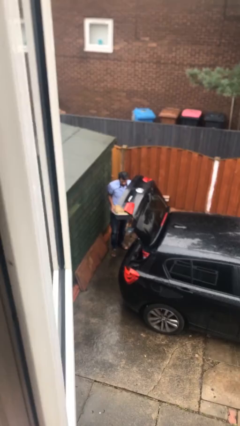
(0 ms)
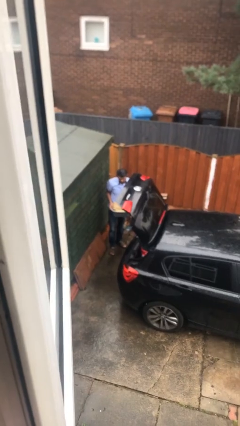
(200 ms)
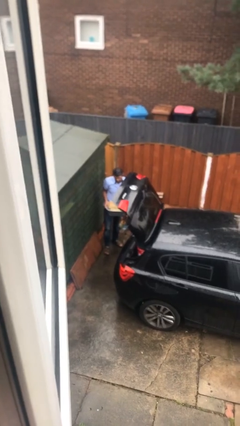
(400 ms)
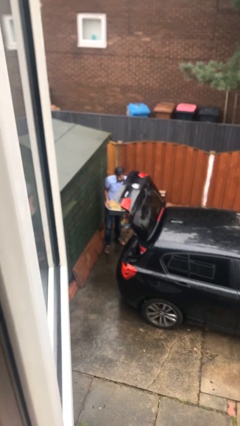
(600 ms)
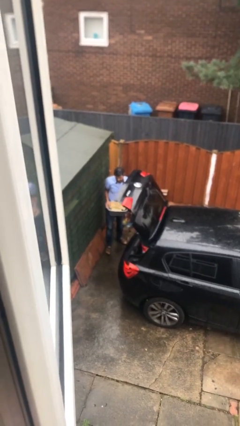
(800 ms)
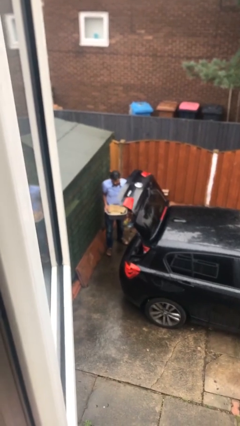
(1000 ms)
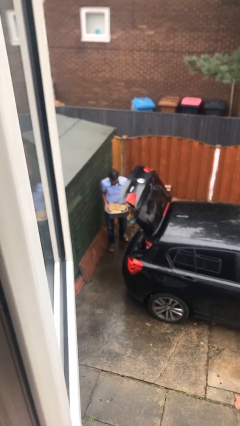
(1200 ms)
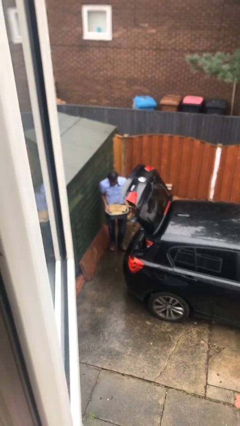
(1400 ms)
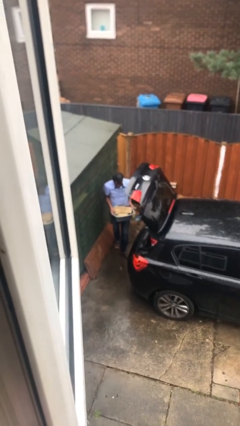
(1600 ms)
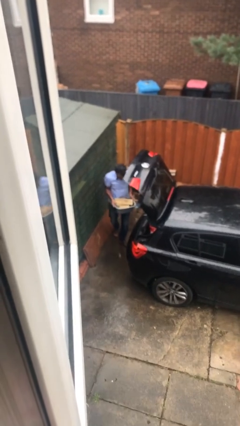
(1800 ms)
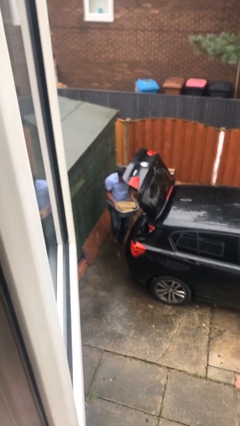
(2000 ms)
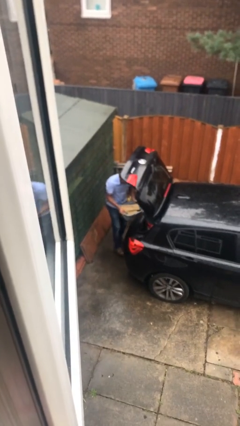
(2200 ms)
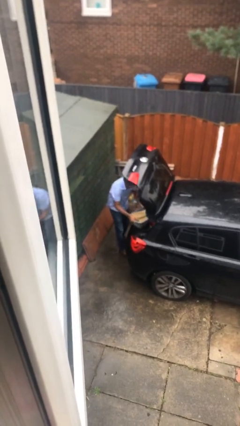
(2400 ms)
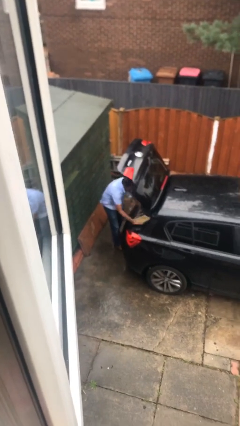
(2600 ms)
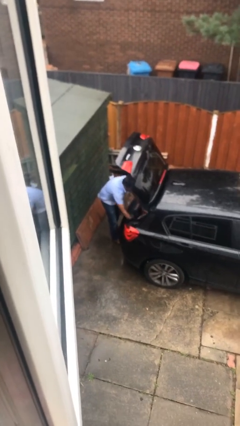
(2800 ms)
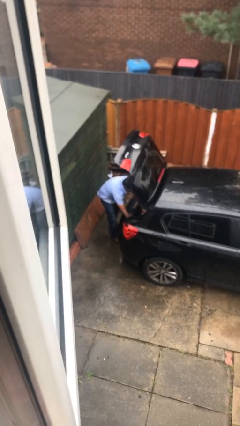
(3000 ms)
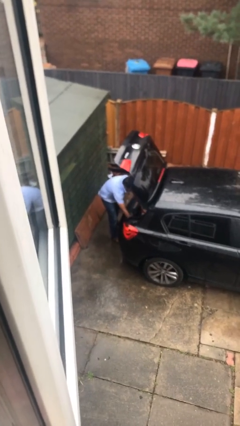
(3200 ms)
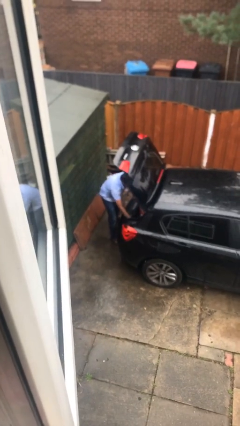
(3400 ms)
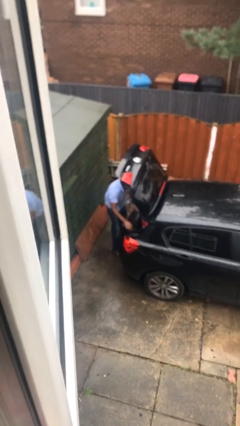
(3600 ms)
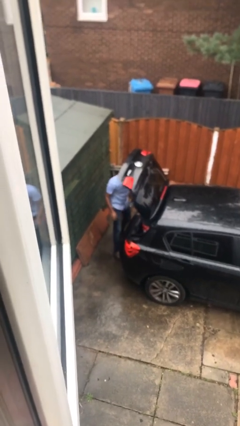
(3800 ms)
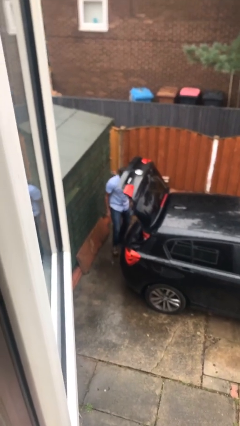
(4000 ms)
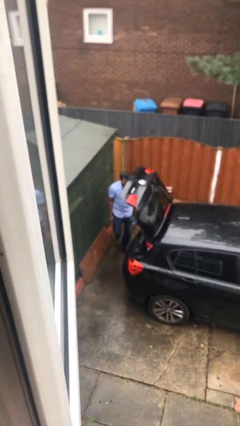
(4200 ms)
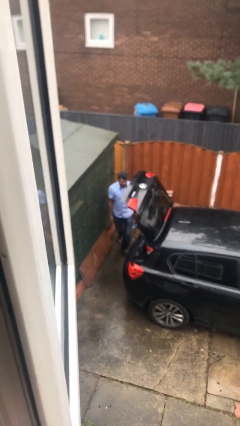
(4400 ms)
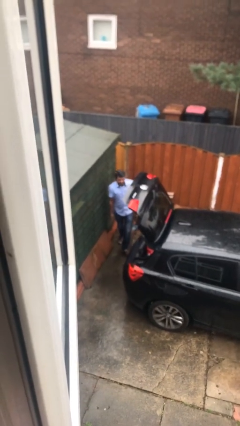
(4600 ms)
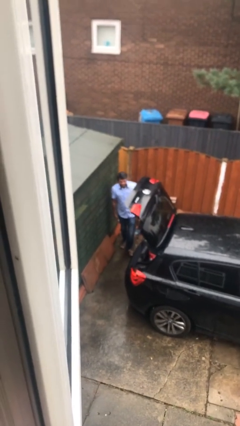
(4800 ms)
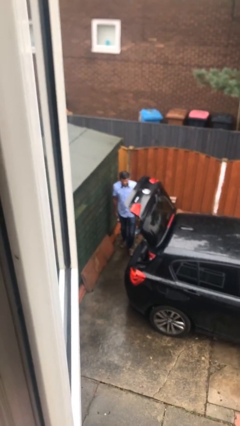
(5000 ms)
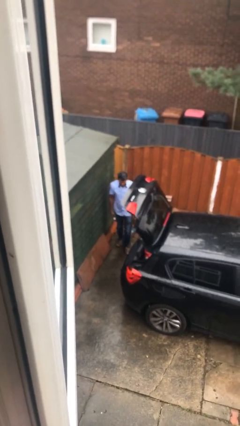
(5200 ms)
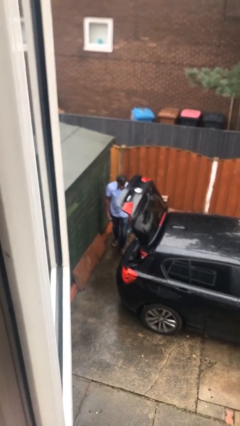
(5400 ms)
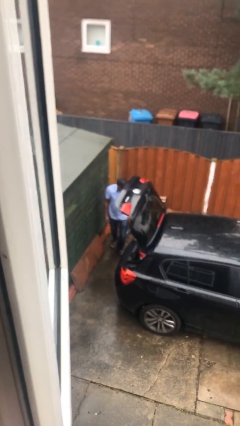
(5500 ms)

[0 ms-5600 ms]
person loads car

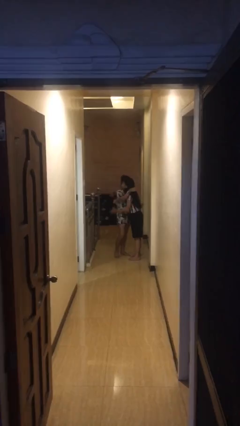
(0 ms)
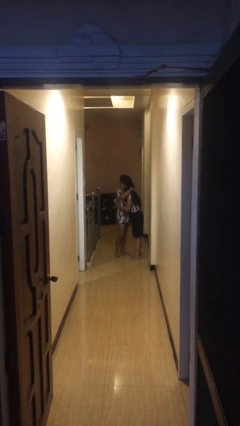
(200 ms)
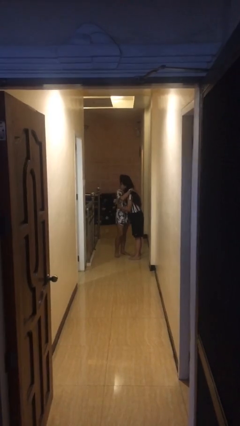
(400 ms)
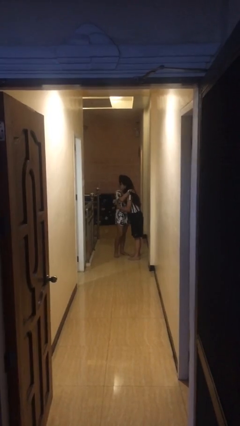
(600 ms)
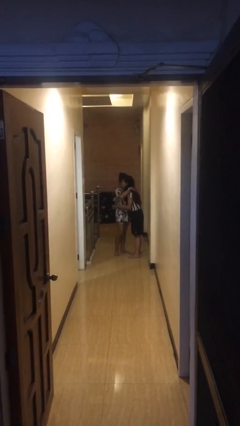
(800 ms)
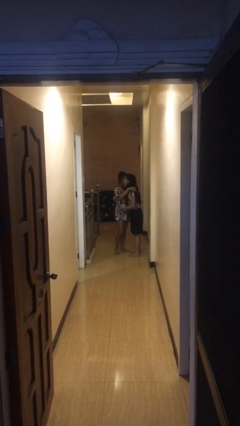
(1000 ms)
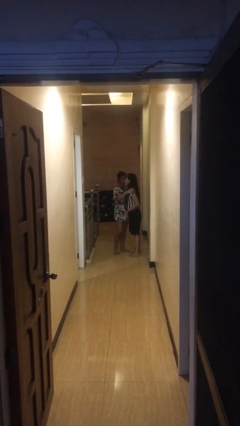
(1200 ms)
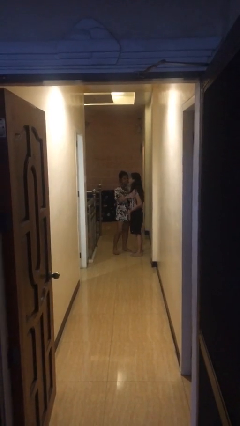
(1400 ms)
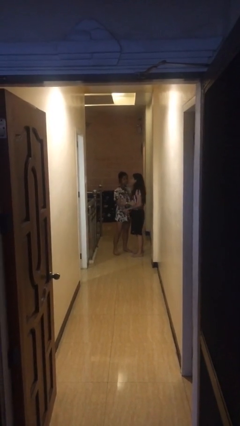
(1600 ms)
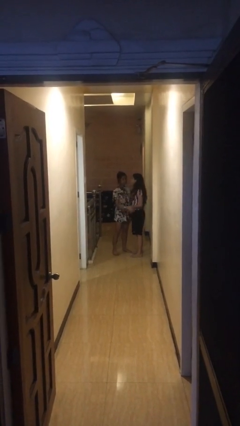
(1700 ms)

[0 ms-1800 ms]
person embraces person

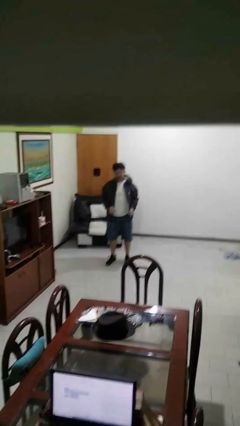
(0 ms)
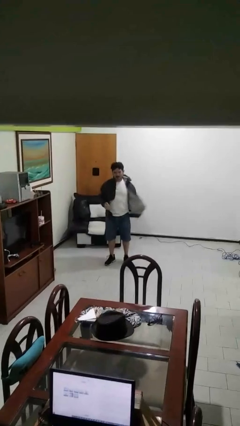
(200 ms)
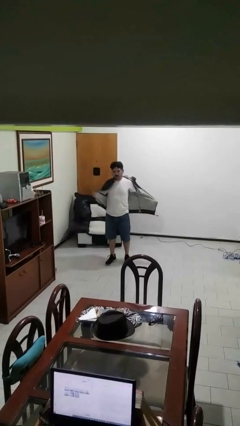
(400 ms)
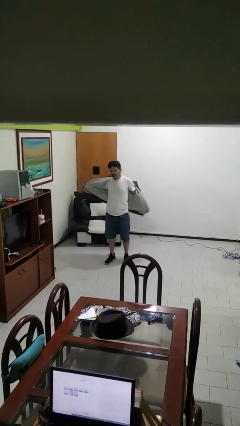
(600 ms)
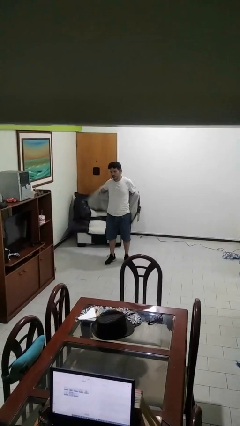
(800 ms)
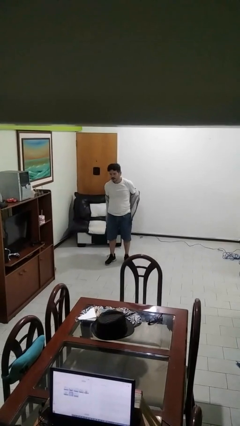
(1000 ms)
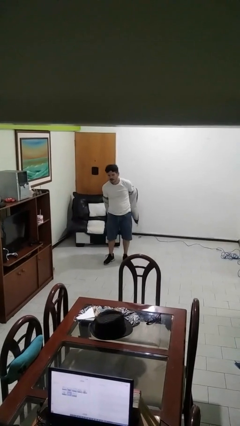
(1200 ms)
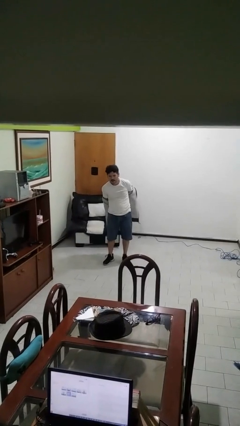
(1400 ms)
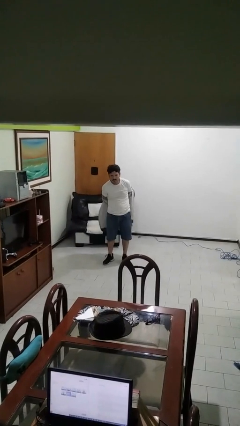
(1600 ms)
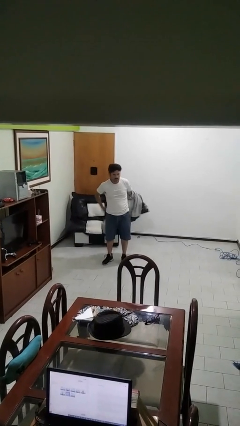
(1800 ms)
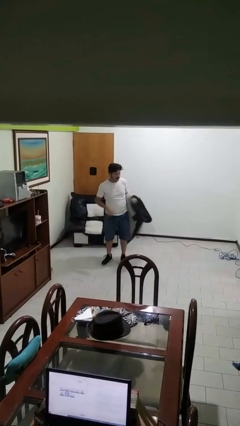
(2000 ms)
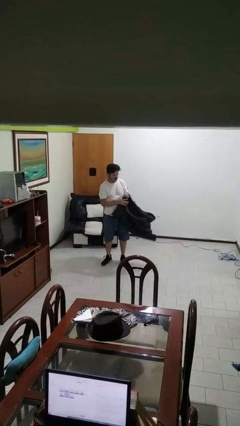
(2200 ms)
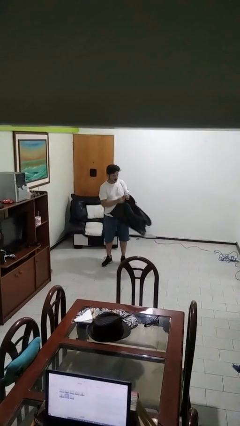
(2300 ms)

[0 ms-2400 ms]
person takes off jacket

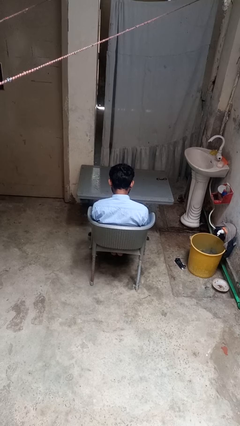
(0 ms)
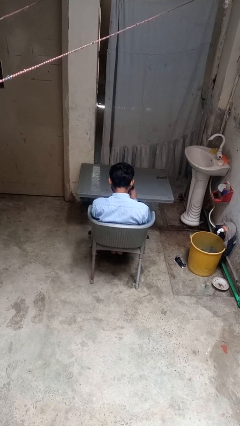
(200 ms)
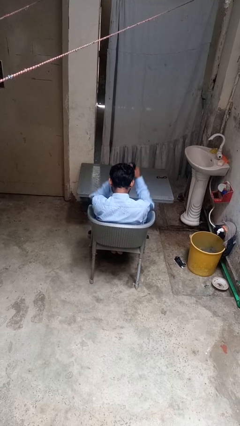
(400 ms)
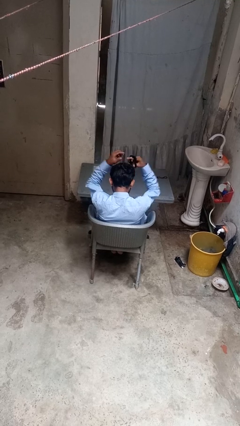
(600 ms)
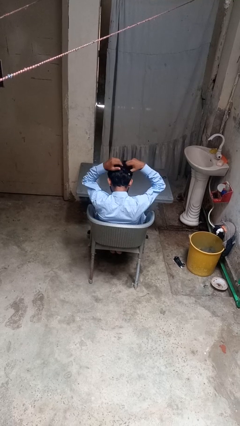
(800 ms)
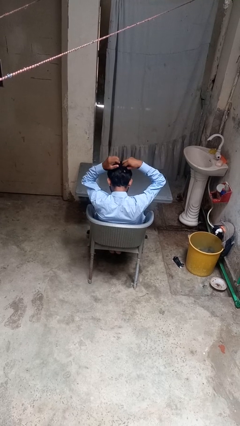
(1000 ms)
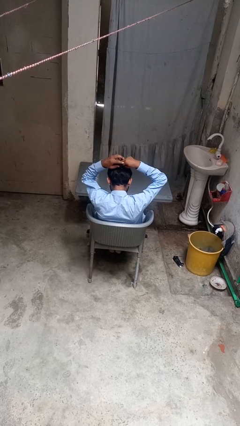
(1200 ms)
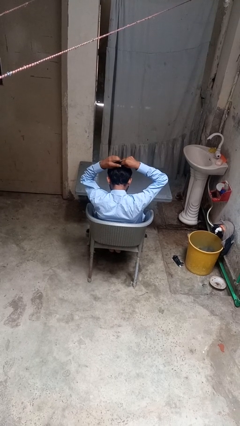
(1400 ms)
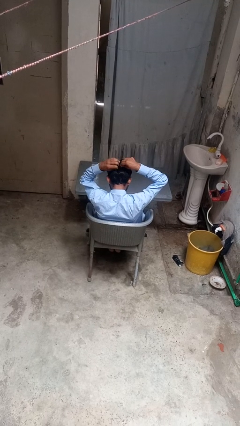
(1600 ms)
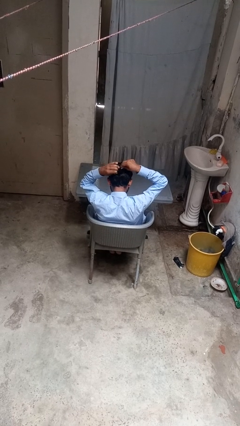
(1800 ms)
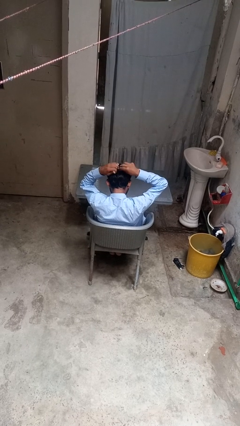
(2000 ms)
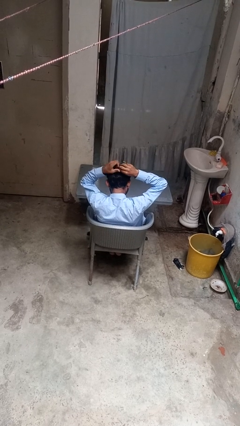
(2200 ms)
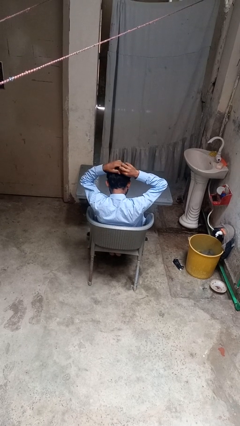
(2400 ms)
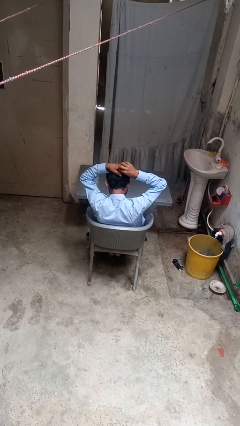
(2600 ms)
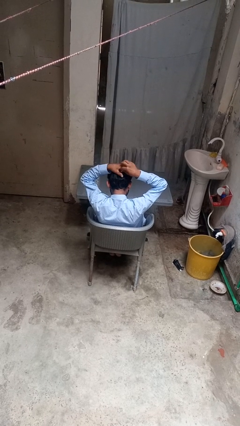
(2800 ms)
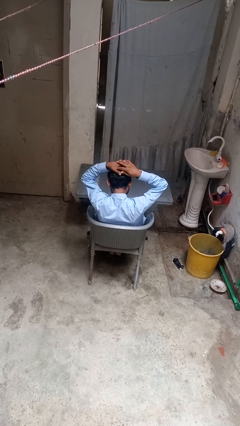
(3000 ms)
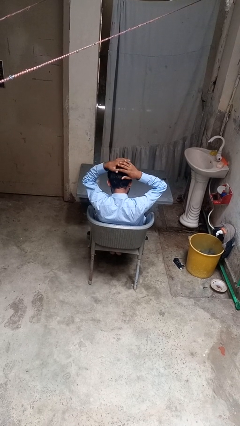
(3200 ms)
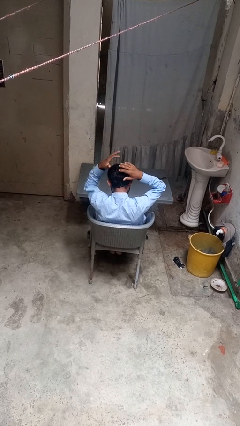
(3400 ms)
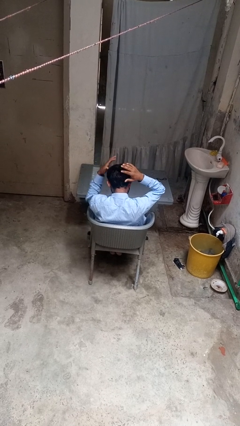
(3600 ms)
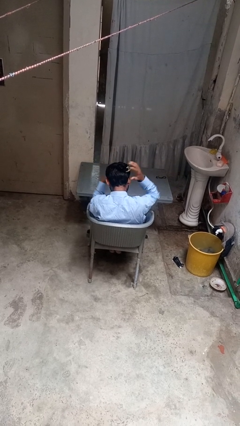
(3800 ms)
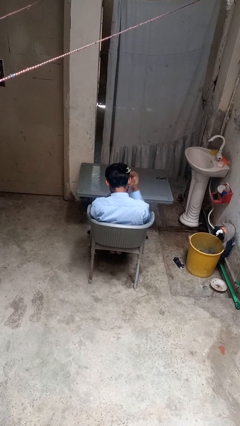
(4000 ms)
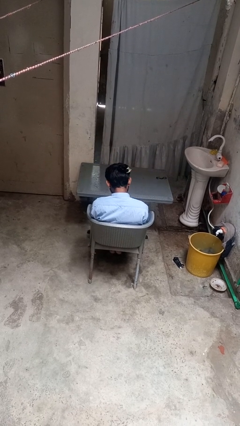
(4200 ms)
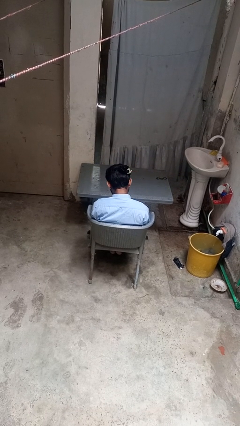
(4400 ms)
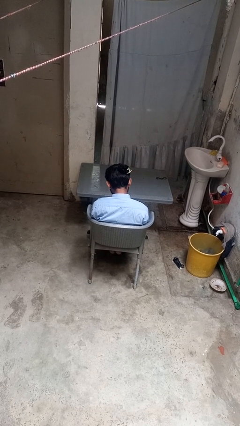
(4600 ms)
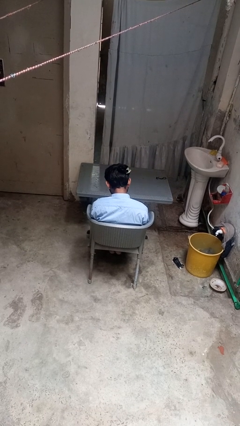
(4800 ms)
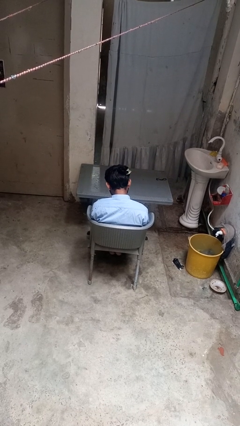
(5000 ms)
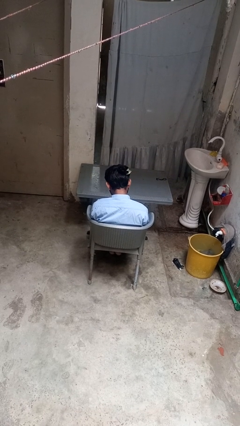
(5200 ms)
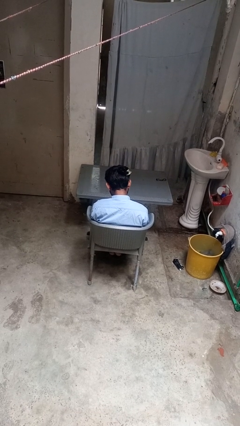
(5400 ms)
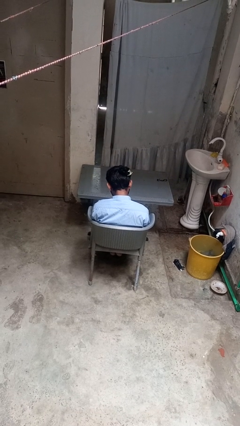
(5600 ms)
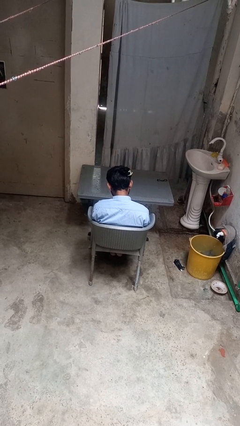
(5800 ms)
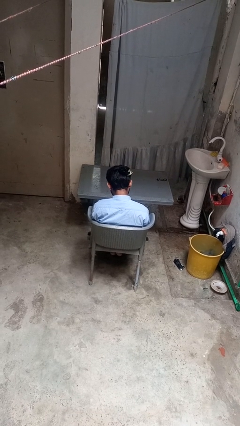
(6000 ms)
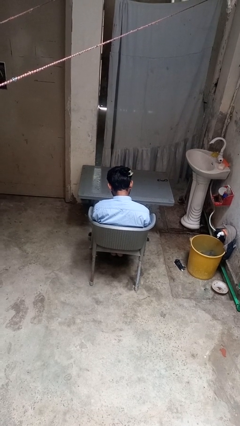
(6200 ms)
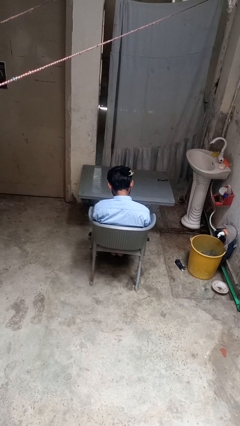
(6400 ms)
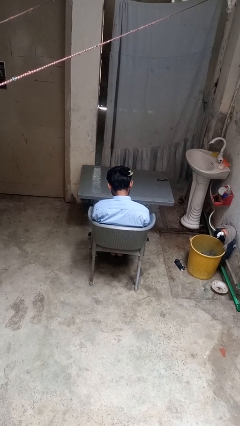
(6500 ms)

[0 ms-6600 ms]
person puts hair in ponytail

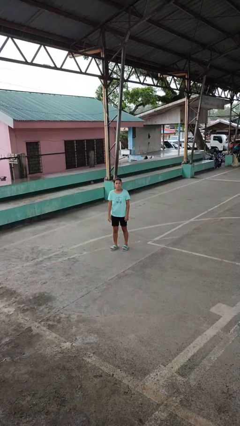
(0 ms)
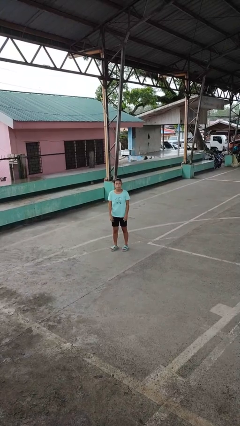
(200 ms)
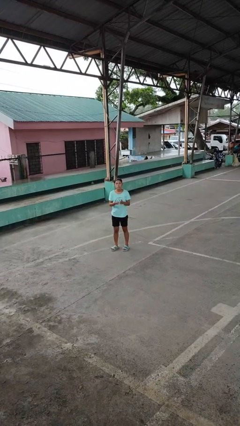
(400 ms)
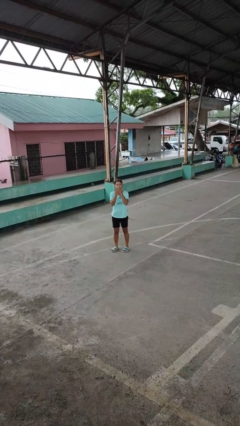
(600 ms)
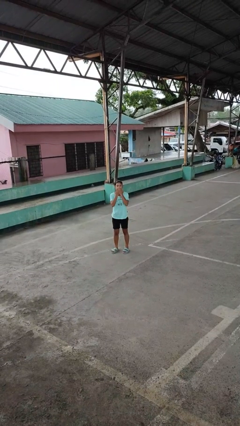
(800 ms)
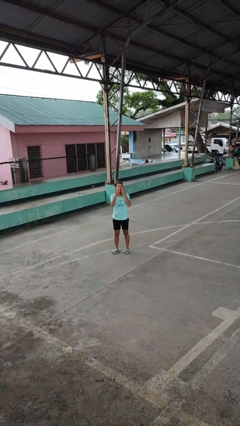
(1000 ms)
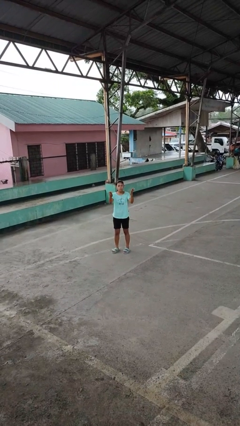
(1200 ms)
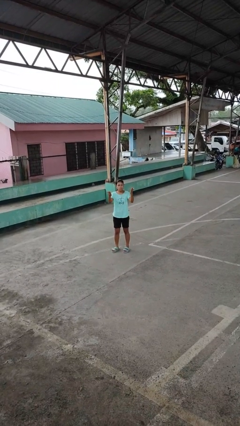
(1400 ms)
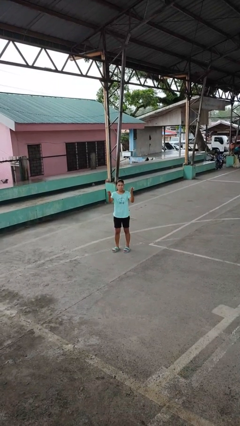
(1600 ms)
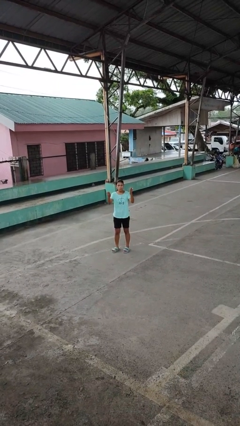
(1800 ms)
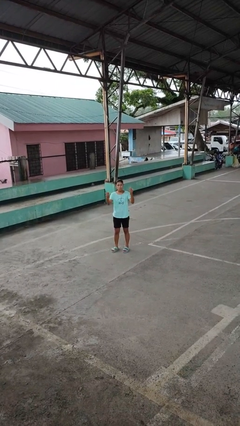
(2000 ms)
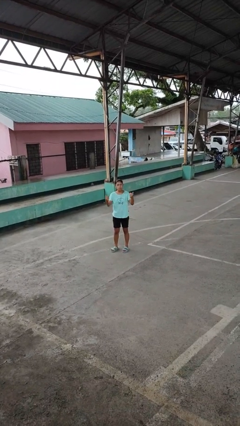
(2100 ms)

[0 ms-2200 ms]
person gestures blow kiss
